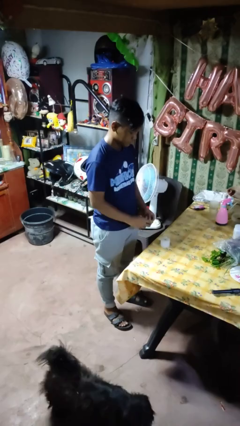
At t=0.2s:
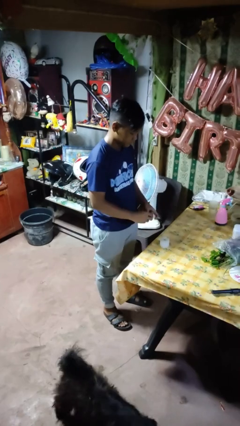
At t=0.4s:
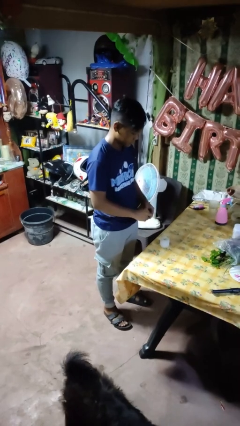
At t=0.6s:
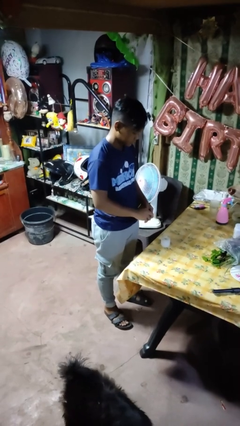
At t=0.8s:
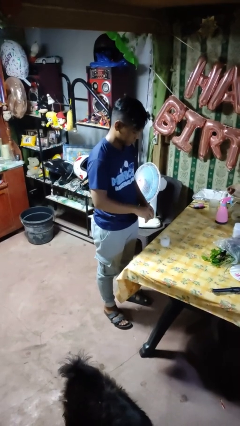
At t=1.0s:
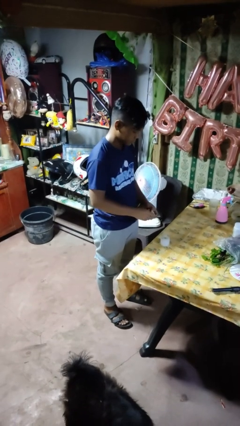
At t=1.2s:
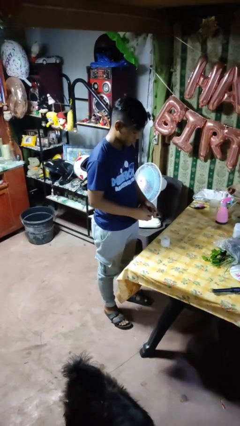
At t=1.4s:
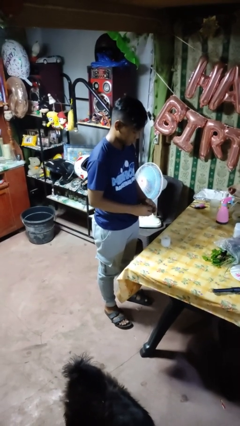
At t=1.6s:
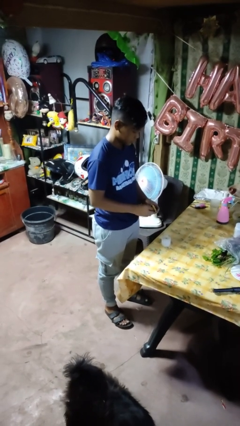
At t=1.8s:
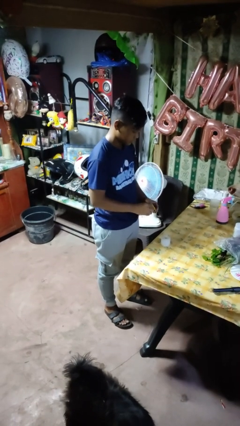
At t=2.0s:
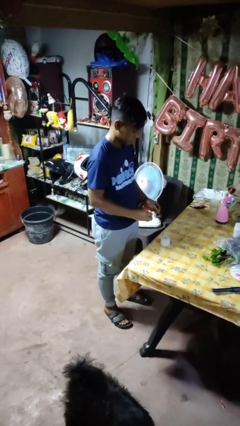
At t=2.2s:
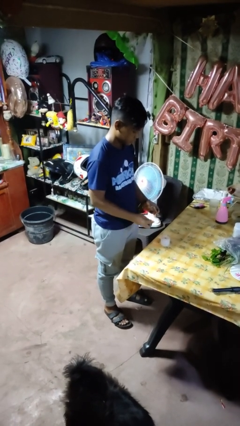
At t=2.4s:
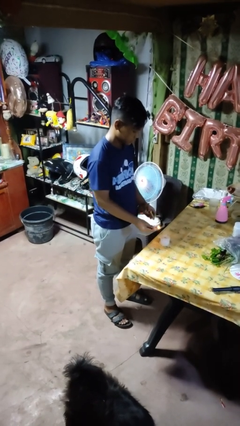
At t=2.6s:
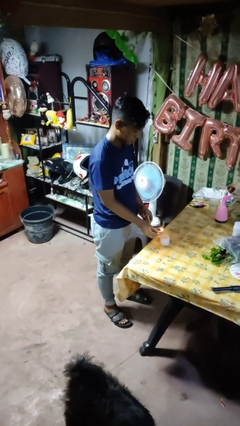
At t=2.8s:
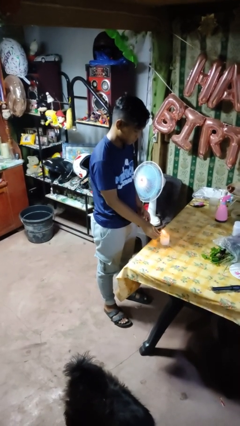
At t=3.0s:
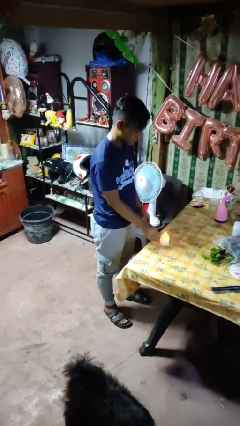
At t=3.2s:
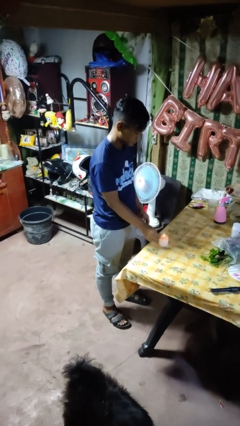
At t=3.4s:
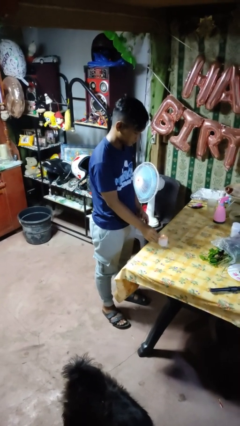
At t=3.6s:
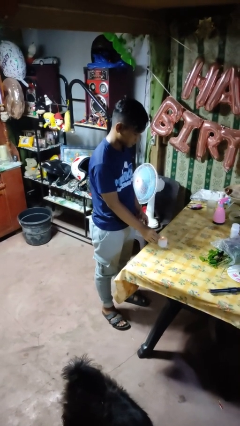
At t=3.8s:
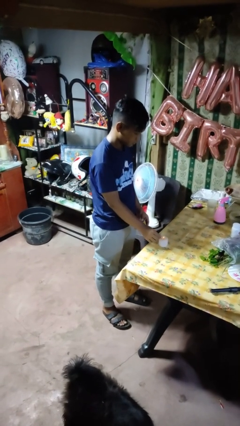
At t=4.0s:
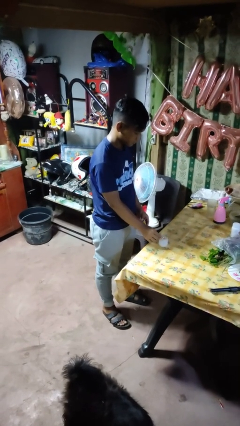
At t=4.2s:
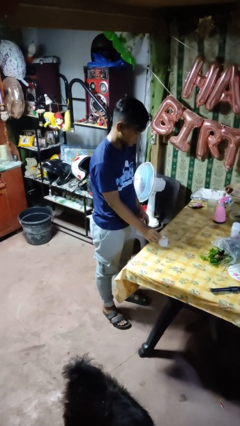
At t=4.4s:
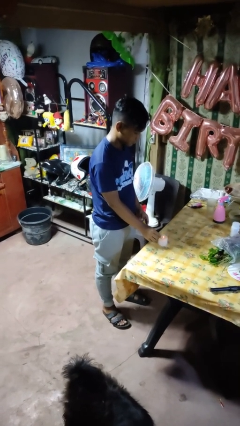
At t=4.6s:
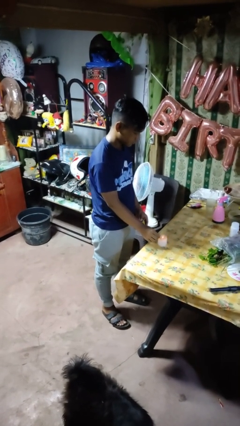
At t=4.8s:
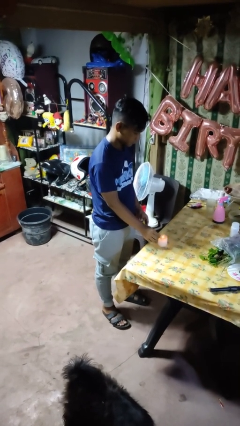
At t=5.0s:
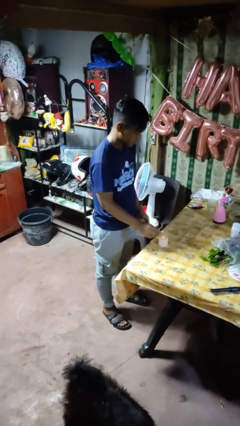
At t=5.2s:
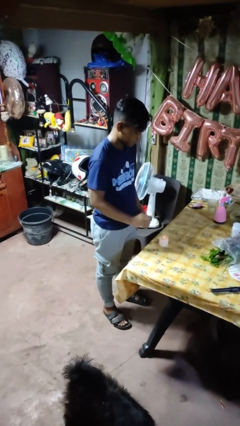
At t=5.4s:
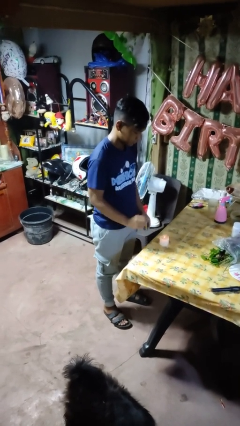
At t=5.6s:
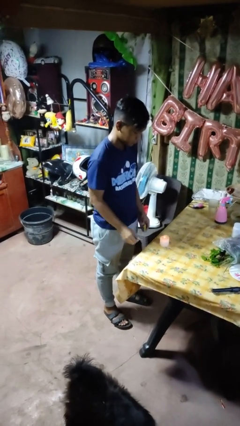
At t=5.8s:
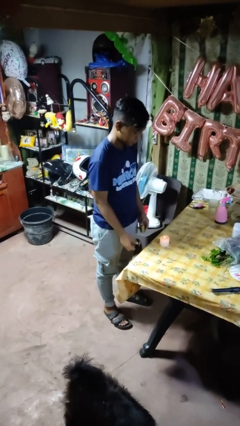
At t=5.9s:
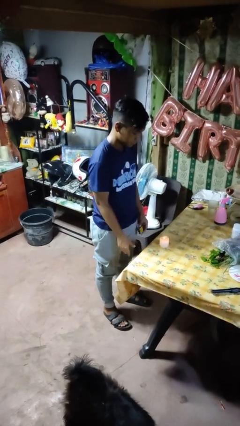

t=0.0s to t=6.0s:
person lights candle

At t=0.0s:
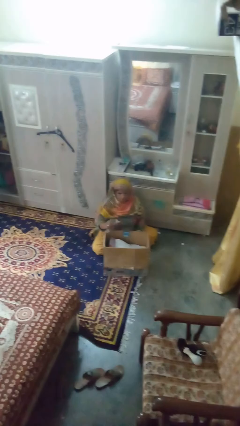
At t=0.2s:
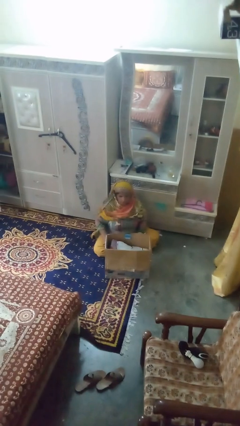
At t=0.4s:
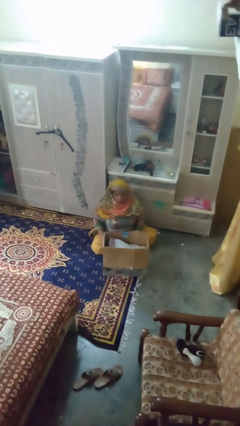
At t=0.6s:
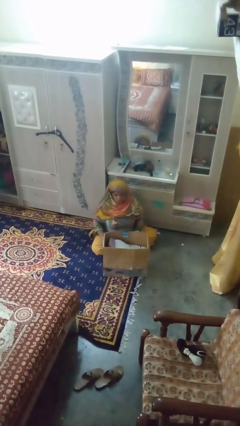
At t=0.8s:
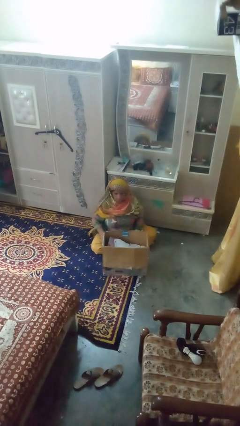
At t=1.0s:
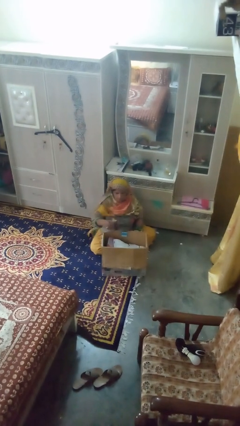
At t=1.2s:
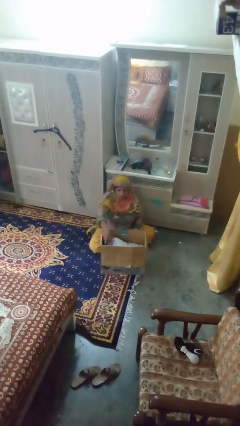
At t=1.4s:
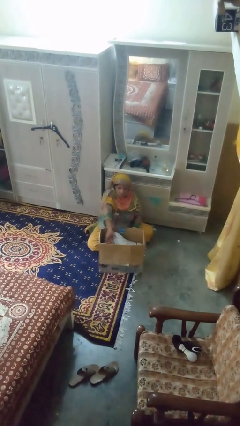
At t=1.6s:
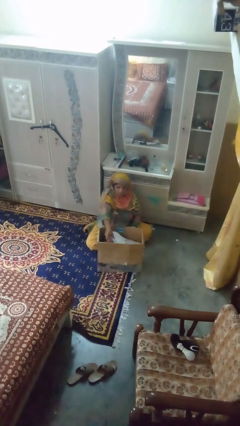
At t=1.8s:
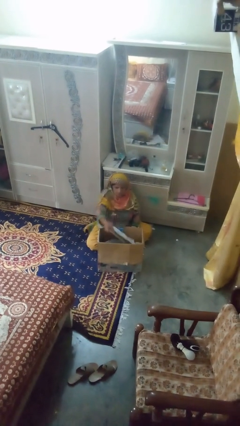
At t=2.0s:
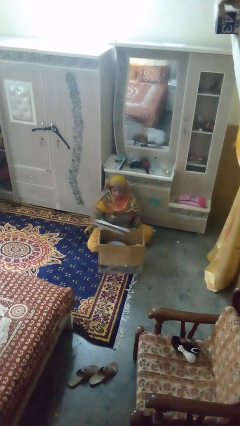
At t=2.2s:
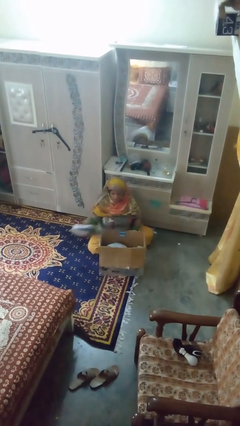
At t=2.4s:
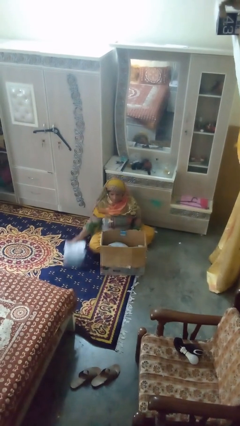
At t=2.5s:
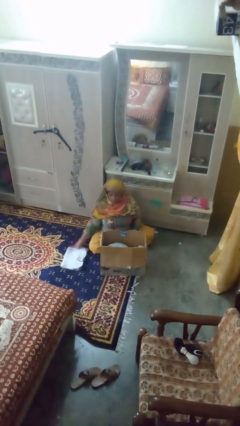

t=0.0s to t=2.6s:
person takes object from box

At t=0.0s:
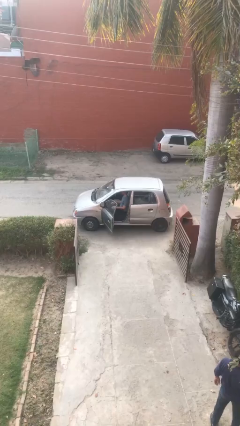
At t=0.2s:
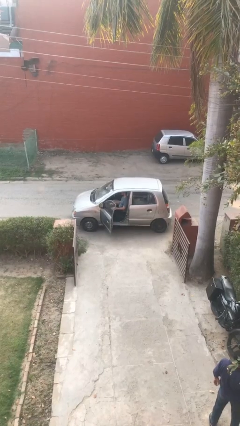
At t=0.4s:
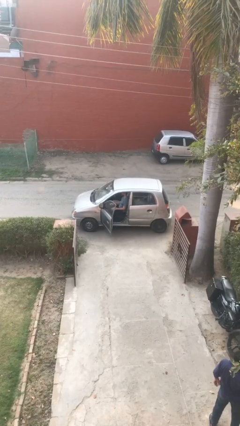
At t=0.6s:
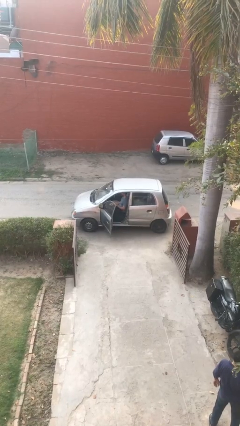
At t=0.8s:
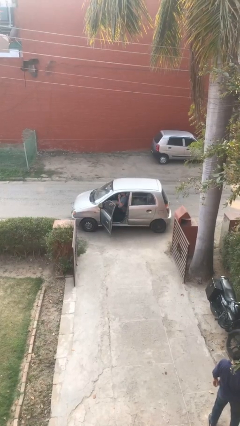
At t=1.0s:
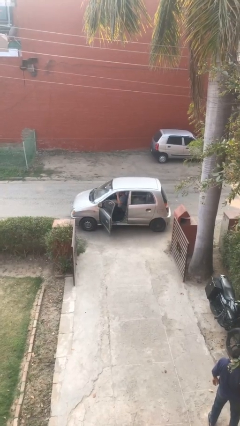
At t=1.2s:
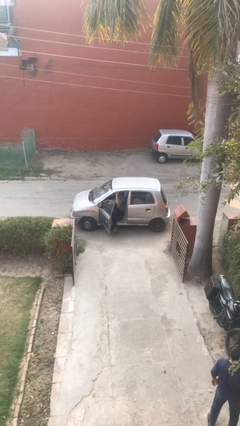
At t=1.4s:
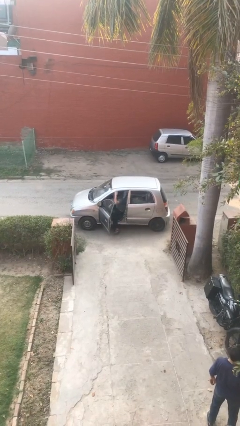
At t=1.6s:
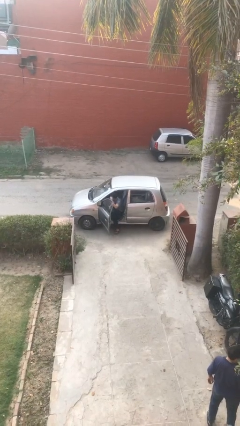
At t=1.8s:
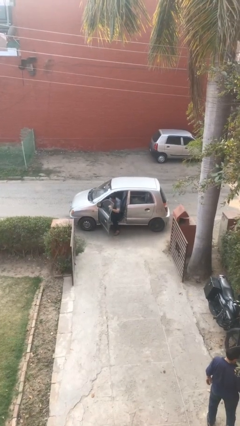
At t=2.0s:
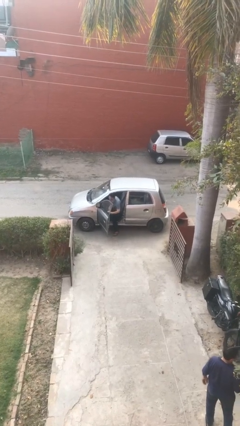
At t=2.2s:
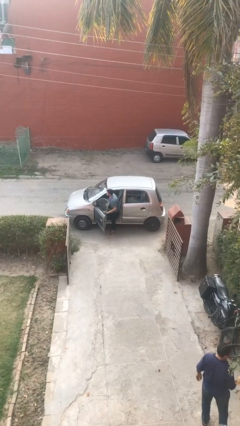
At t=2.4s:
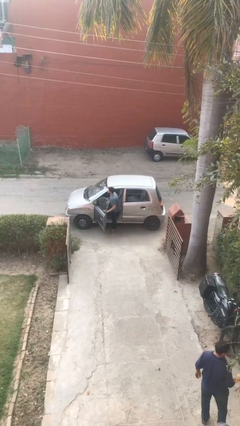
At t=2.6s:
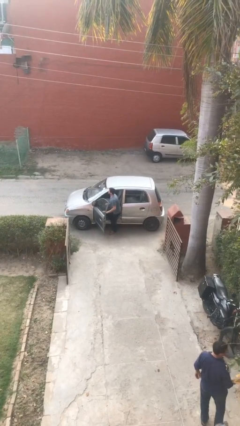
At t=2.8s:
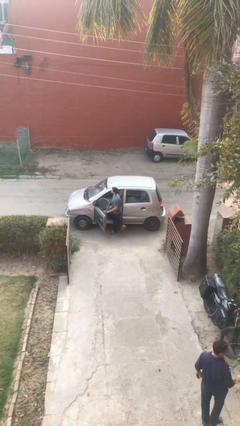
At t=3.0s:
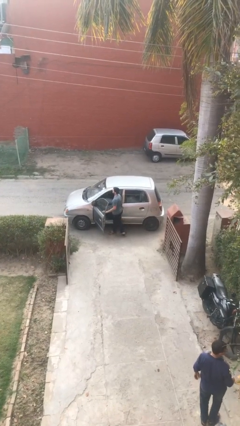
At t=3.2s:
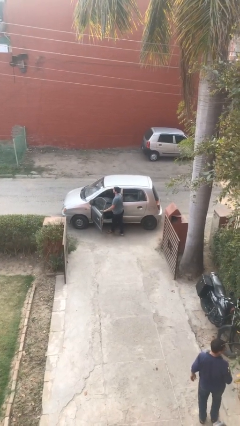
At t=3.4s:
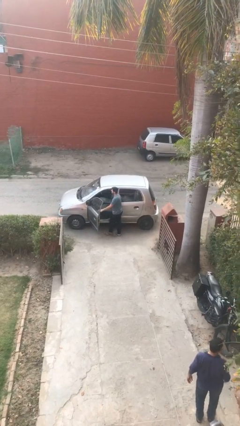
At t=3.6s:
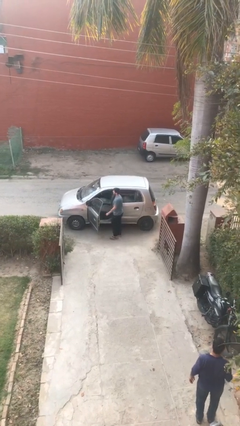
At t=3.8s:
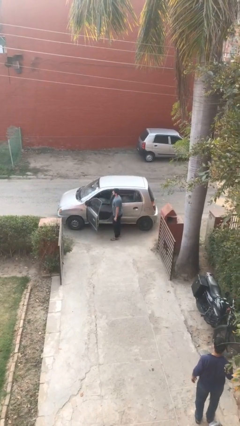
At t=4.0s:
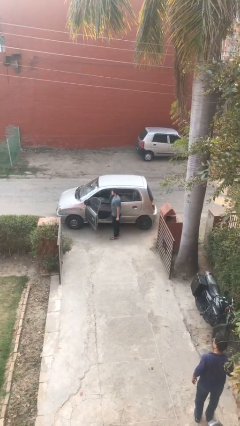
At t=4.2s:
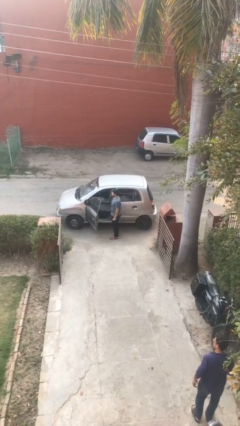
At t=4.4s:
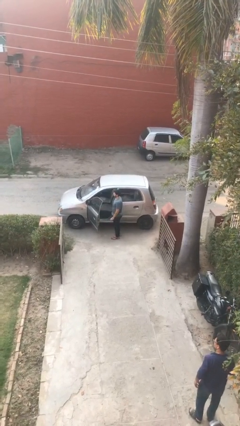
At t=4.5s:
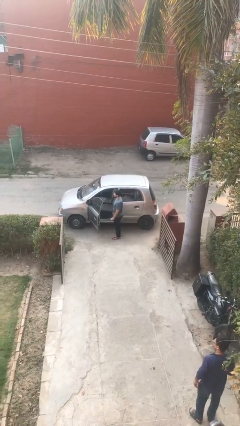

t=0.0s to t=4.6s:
person exits car

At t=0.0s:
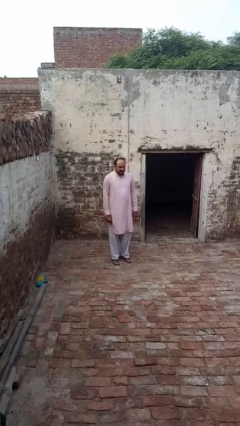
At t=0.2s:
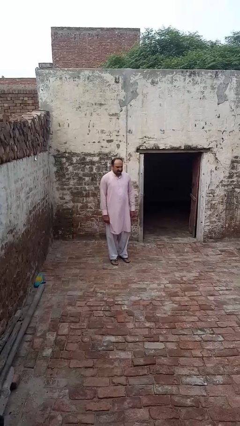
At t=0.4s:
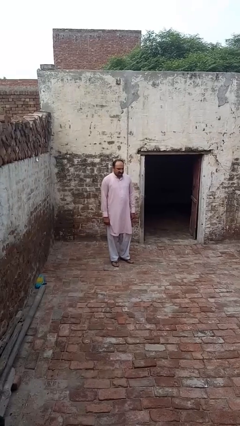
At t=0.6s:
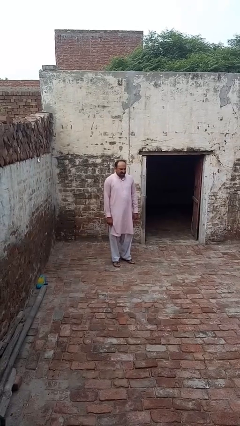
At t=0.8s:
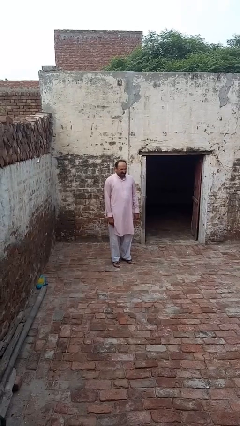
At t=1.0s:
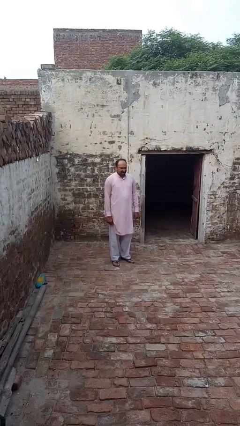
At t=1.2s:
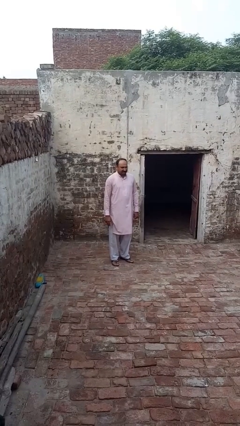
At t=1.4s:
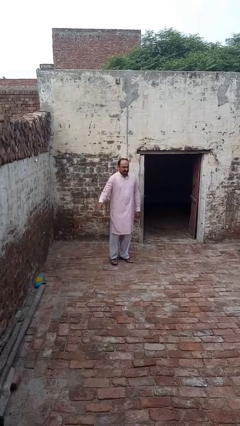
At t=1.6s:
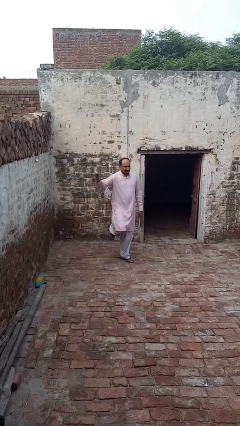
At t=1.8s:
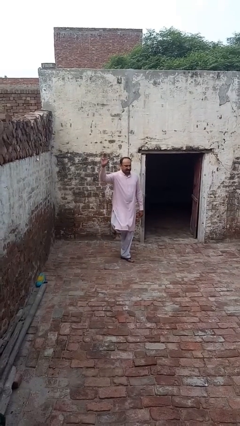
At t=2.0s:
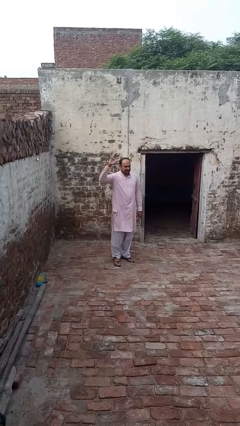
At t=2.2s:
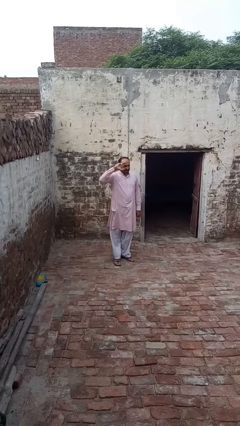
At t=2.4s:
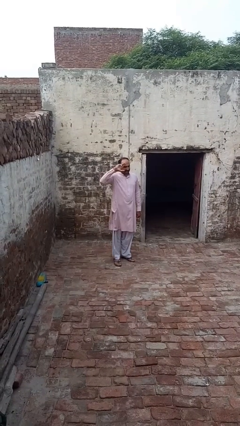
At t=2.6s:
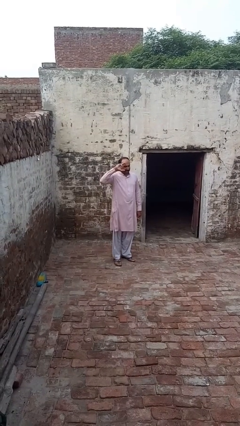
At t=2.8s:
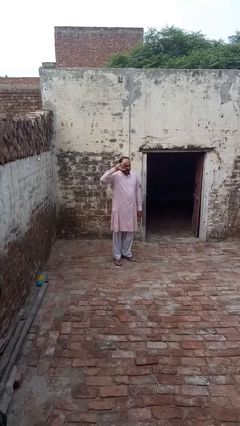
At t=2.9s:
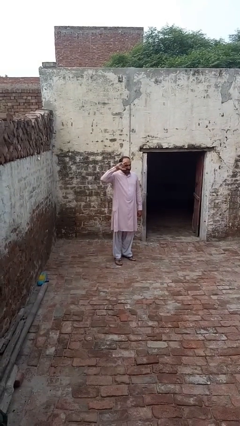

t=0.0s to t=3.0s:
person salutes

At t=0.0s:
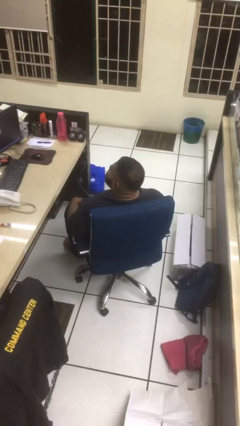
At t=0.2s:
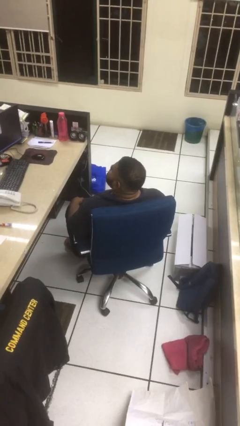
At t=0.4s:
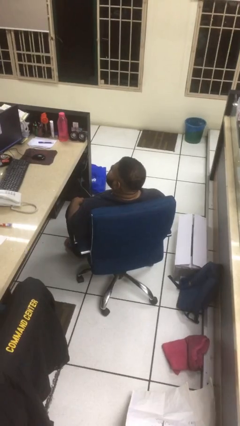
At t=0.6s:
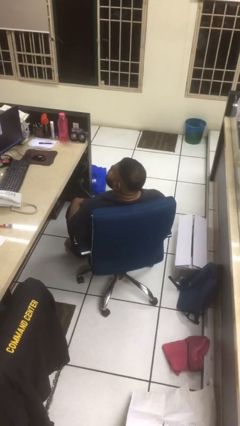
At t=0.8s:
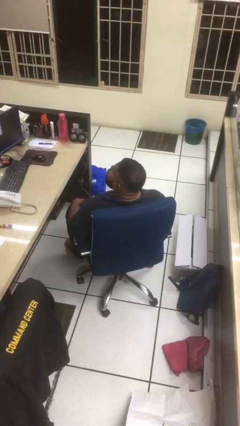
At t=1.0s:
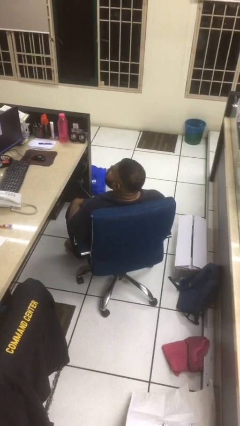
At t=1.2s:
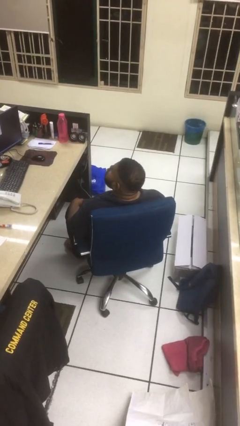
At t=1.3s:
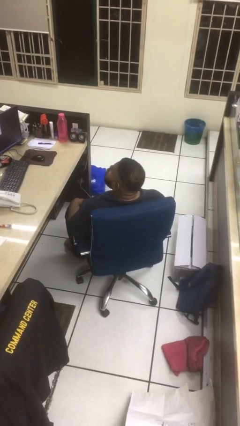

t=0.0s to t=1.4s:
person sticks out tongue
